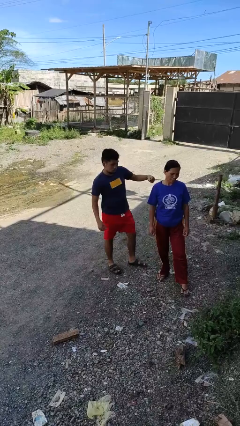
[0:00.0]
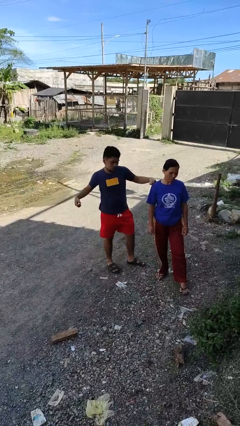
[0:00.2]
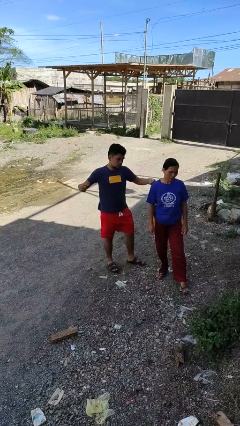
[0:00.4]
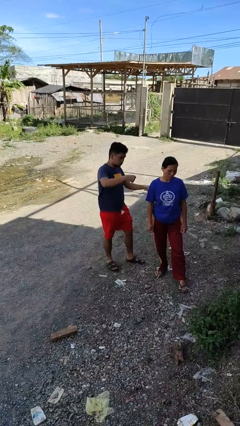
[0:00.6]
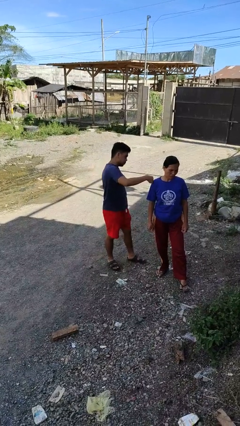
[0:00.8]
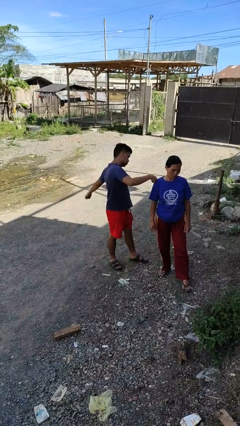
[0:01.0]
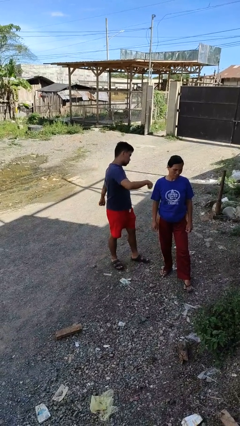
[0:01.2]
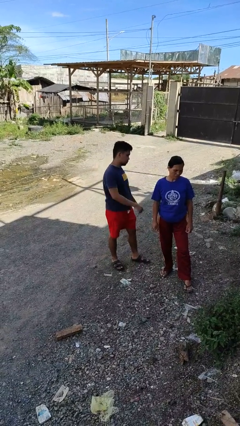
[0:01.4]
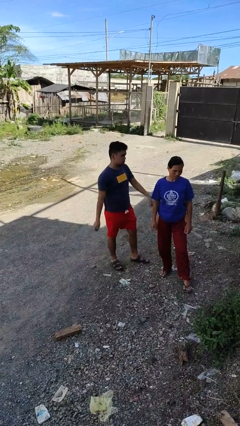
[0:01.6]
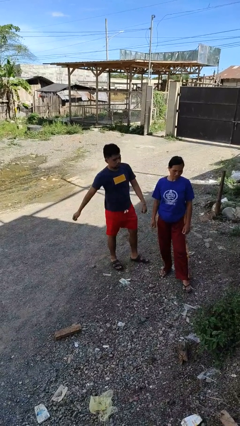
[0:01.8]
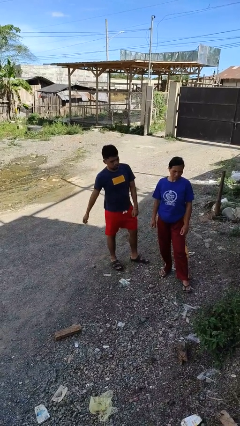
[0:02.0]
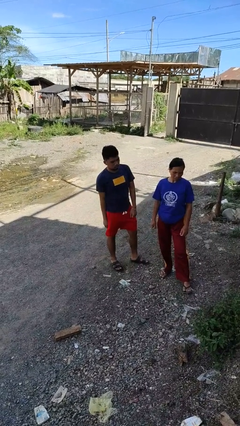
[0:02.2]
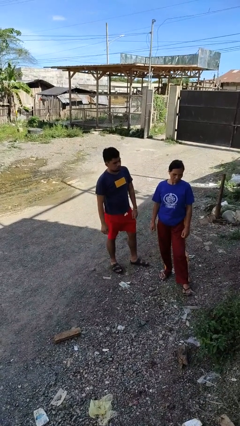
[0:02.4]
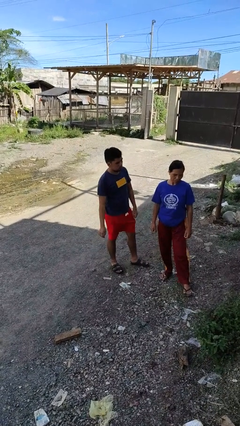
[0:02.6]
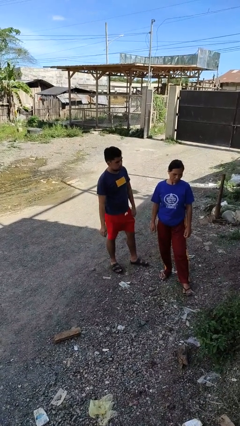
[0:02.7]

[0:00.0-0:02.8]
person pounds shoulders of person

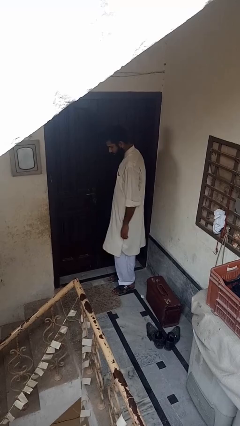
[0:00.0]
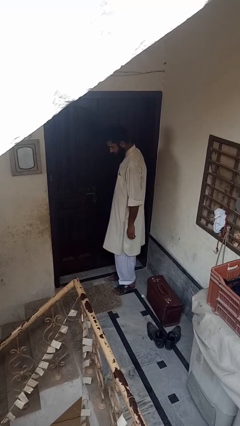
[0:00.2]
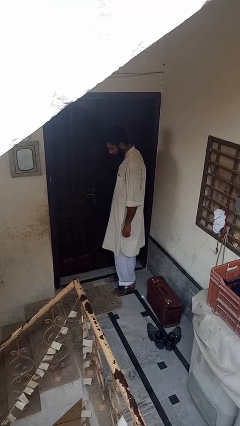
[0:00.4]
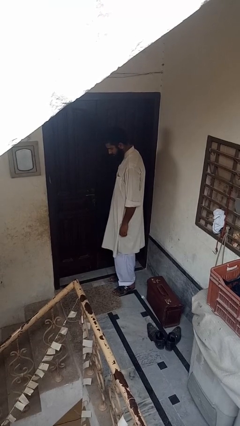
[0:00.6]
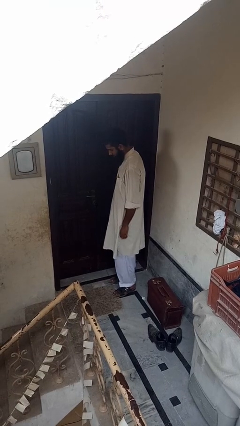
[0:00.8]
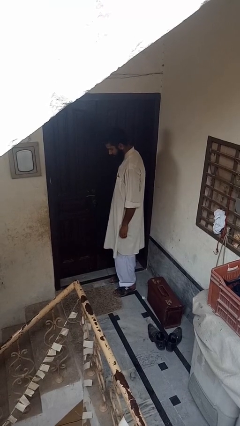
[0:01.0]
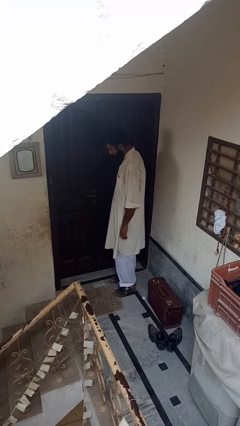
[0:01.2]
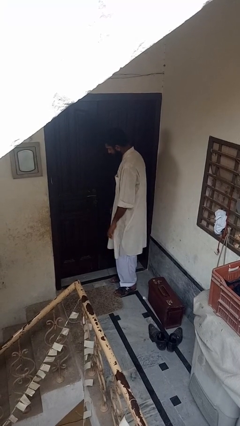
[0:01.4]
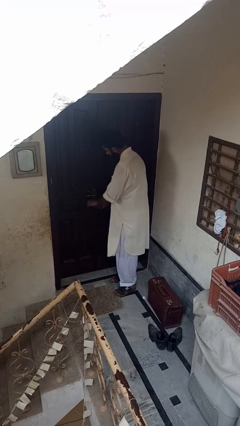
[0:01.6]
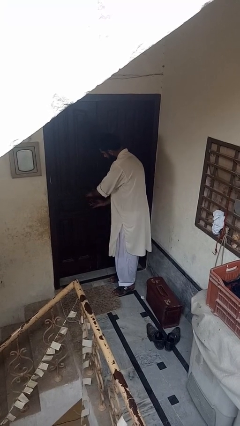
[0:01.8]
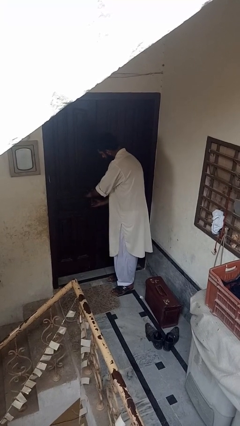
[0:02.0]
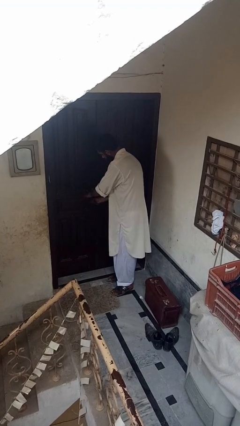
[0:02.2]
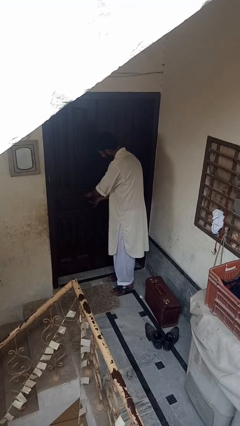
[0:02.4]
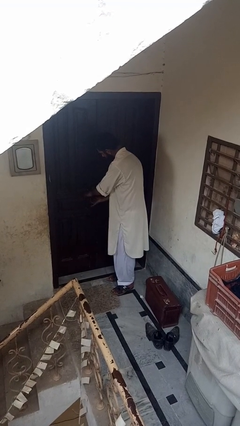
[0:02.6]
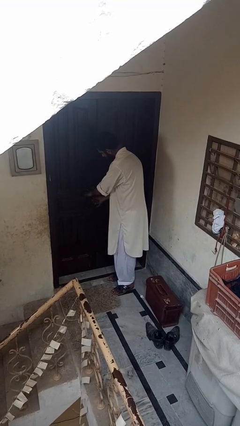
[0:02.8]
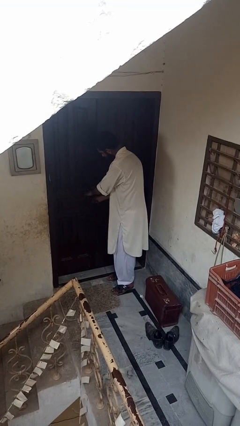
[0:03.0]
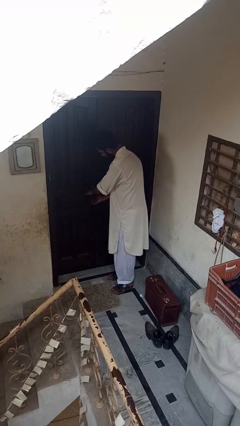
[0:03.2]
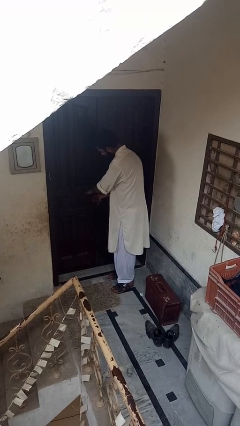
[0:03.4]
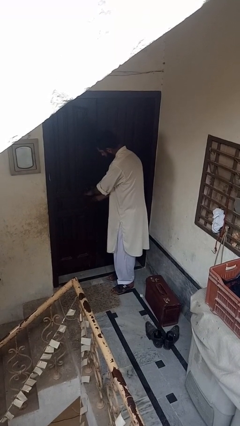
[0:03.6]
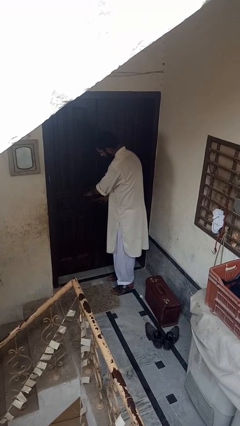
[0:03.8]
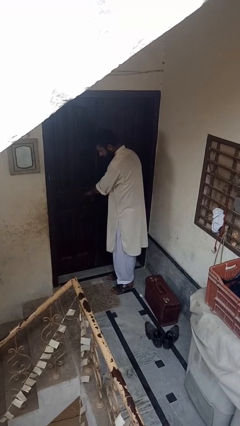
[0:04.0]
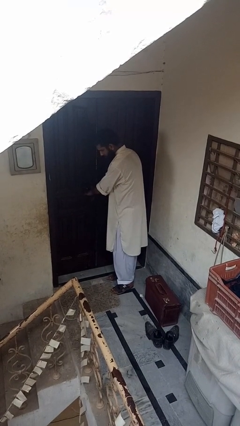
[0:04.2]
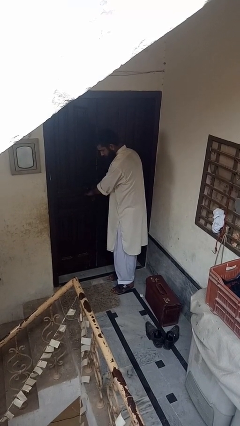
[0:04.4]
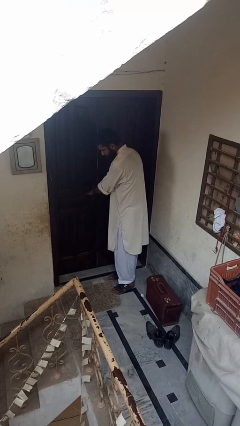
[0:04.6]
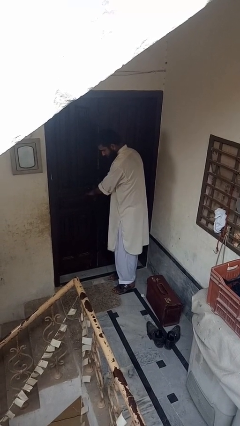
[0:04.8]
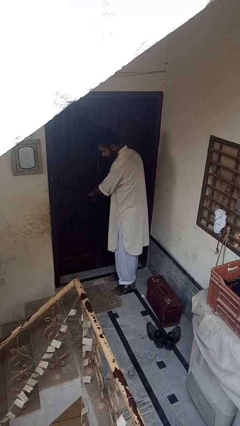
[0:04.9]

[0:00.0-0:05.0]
person unlocks door with keys

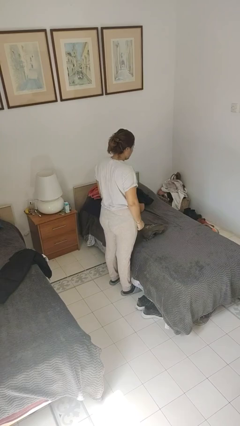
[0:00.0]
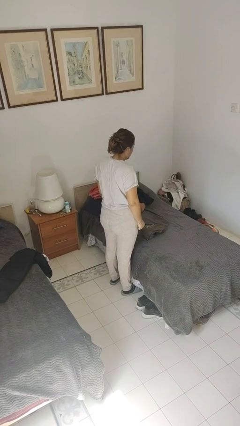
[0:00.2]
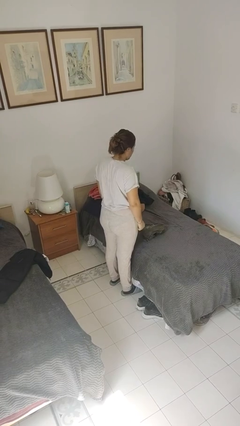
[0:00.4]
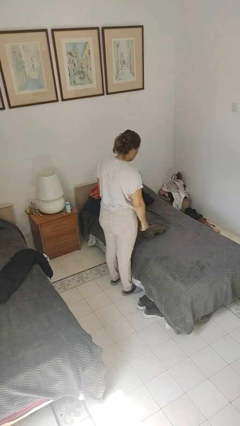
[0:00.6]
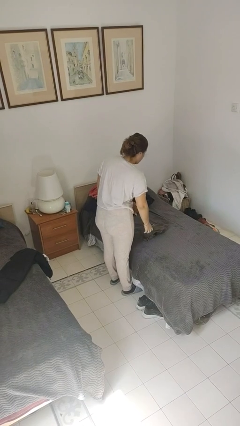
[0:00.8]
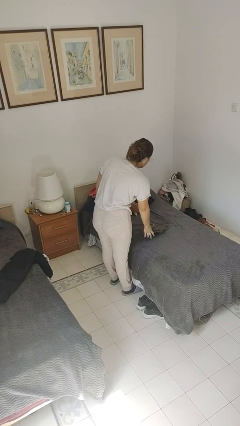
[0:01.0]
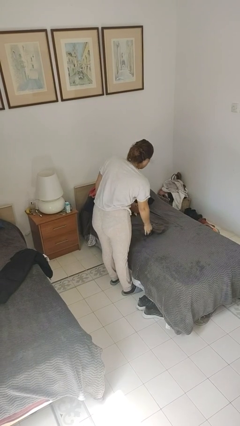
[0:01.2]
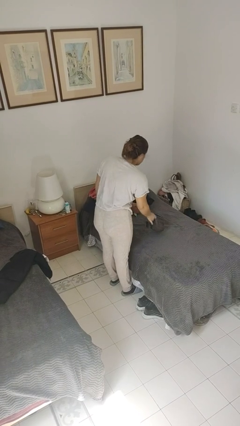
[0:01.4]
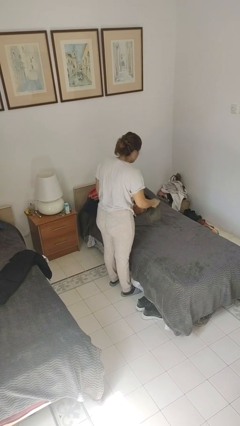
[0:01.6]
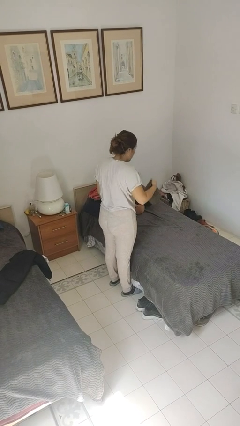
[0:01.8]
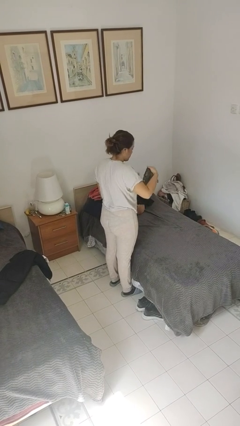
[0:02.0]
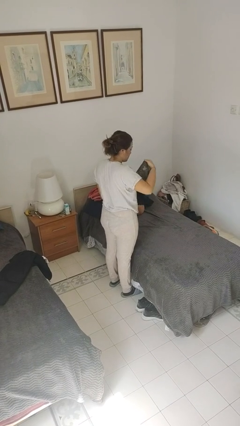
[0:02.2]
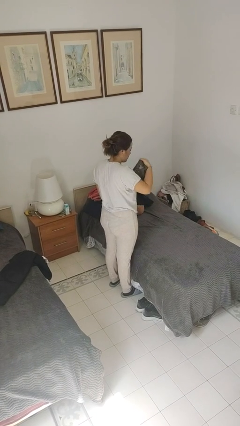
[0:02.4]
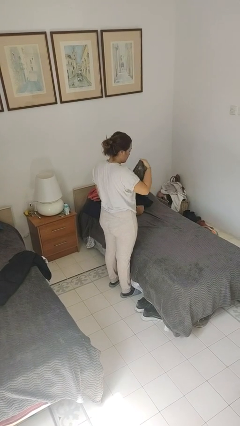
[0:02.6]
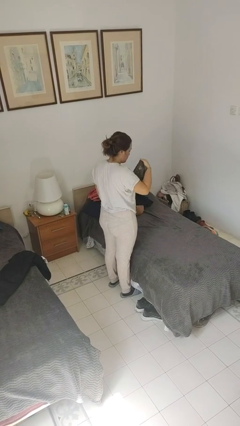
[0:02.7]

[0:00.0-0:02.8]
person picks up object from bed

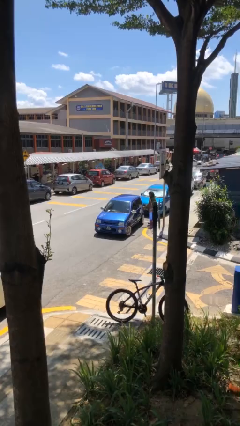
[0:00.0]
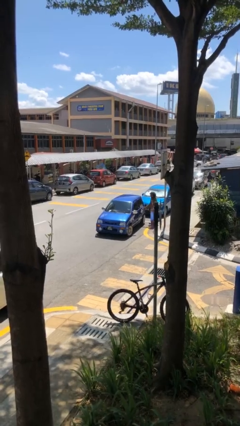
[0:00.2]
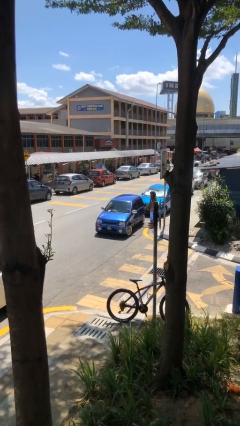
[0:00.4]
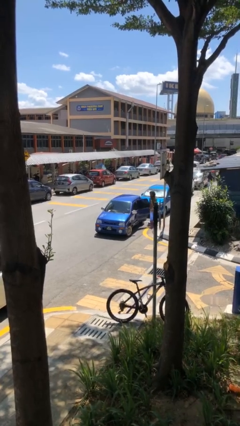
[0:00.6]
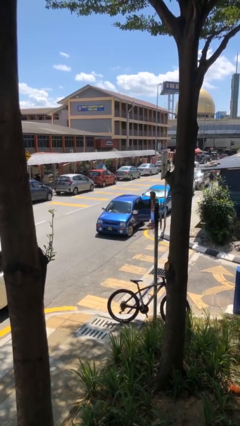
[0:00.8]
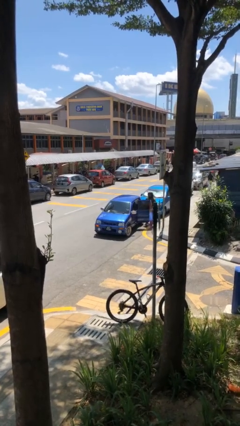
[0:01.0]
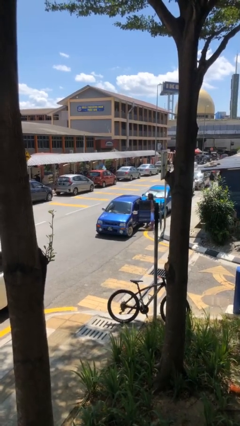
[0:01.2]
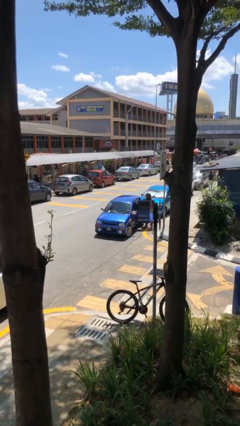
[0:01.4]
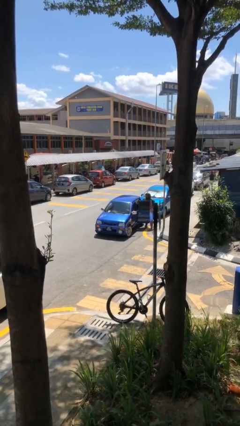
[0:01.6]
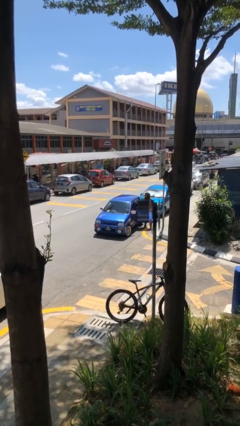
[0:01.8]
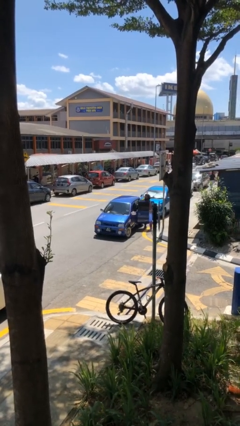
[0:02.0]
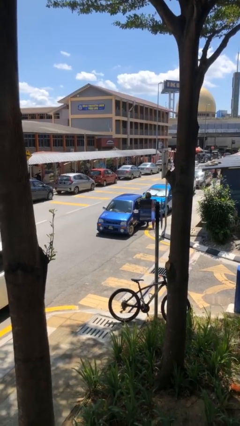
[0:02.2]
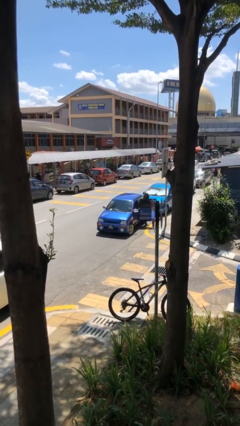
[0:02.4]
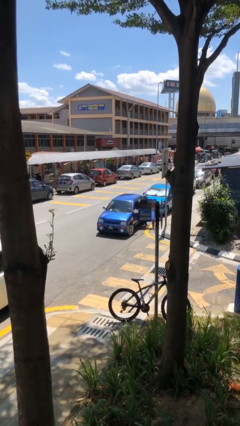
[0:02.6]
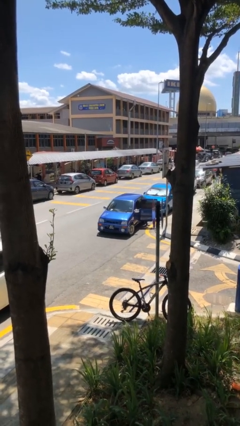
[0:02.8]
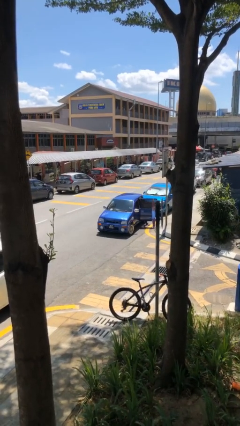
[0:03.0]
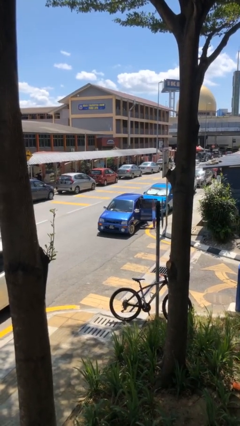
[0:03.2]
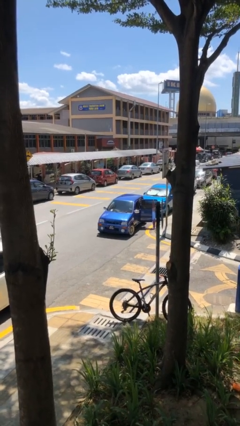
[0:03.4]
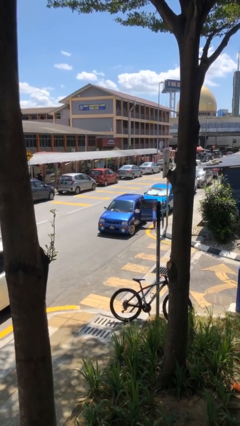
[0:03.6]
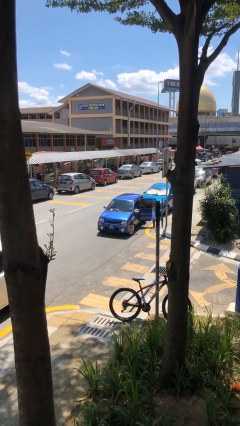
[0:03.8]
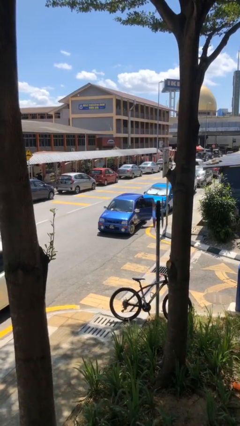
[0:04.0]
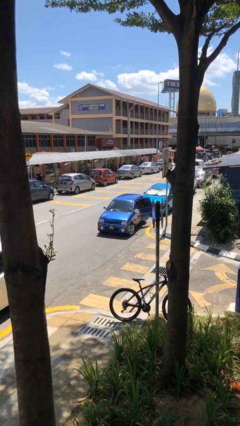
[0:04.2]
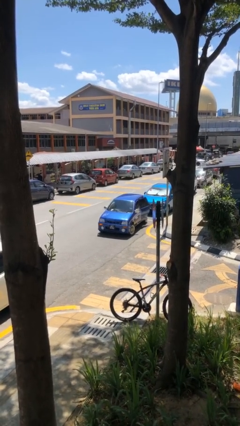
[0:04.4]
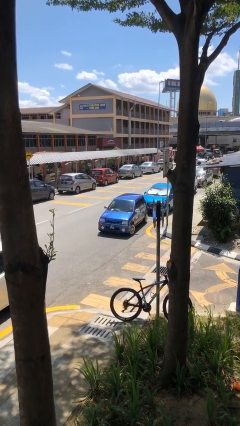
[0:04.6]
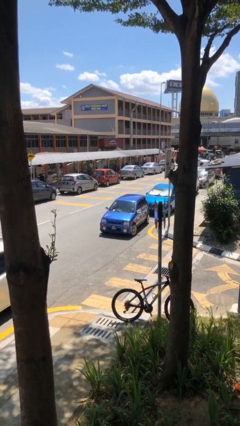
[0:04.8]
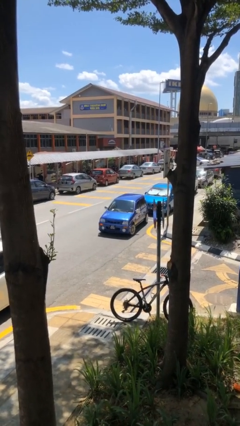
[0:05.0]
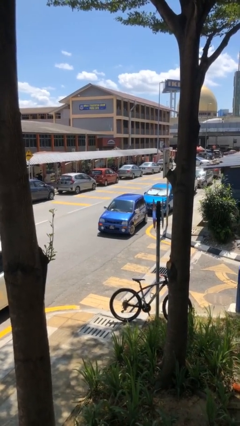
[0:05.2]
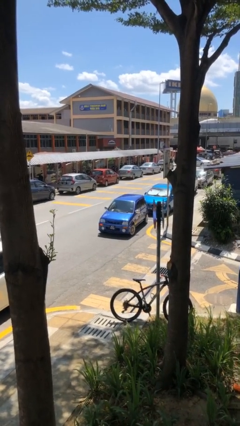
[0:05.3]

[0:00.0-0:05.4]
car picks up person

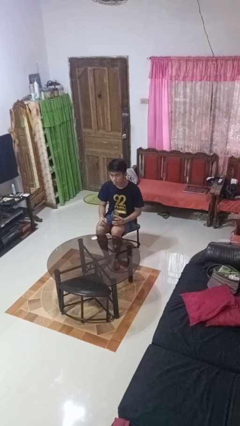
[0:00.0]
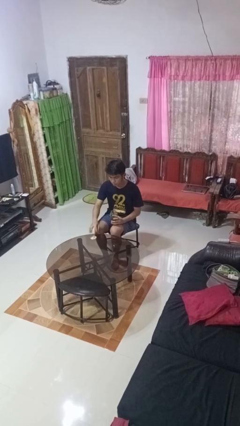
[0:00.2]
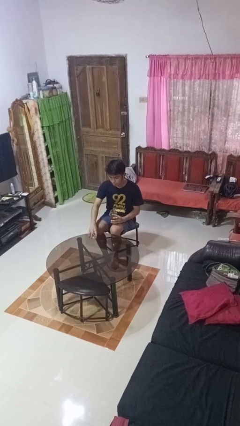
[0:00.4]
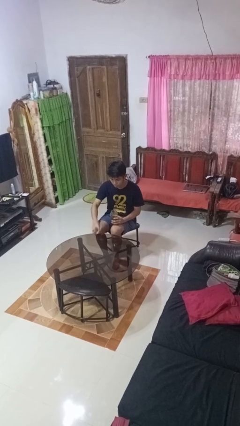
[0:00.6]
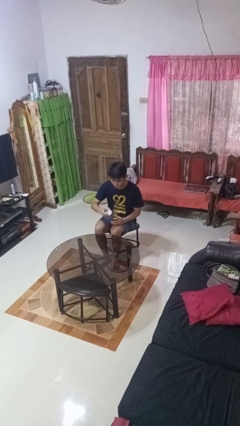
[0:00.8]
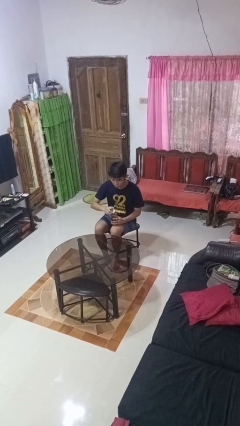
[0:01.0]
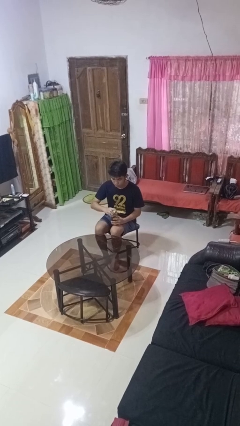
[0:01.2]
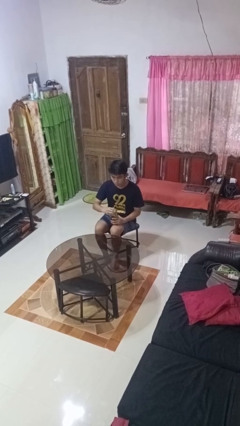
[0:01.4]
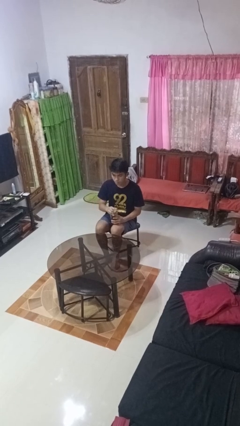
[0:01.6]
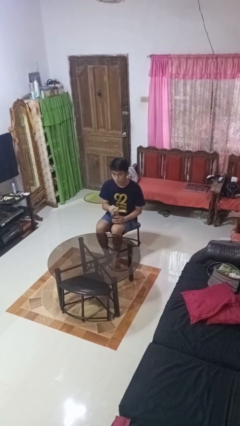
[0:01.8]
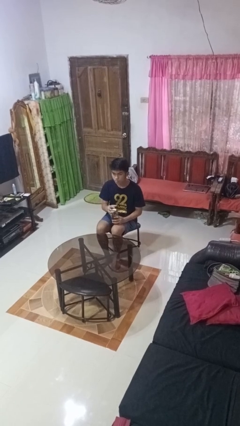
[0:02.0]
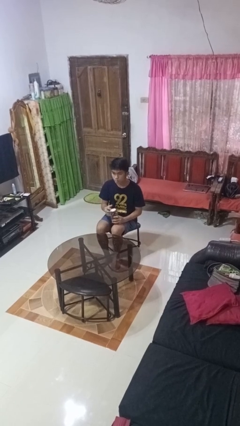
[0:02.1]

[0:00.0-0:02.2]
person closes jar
